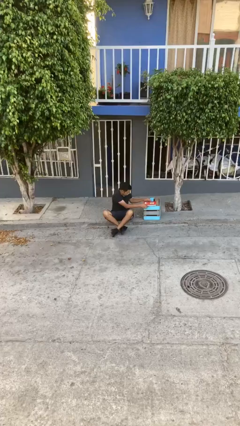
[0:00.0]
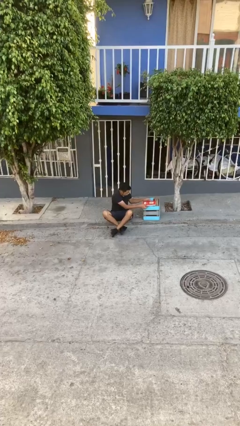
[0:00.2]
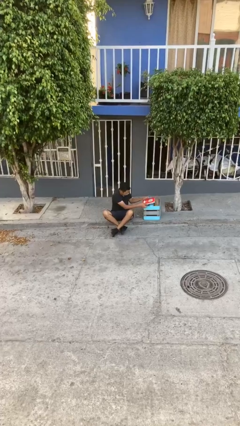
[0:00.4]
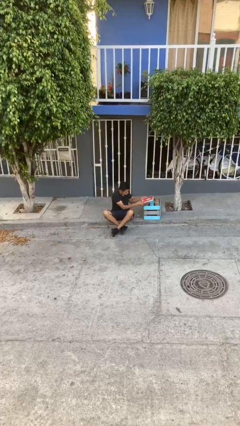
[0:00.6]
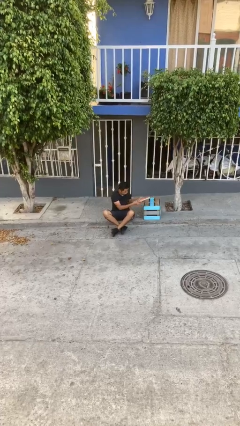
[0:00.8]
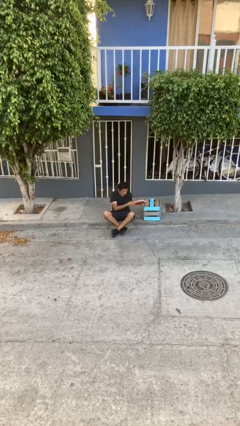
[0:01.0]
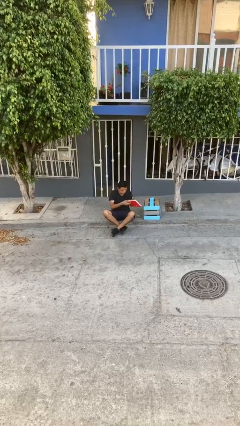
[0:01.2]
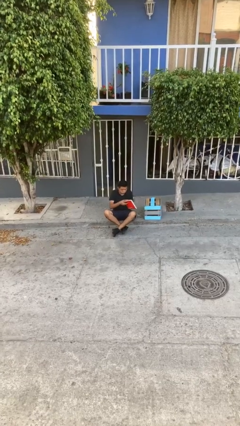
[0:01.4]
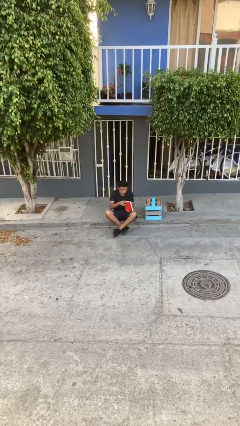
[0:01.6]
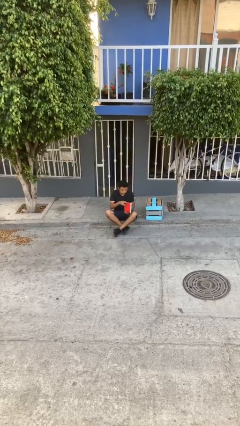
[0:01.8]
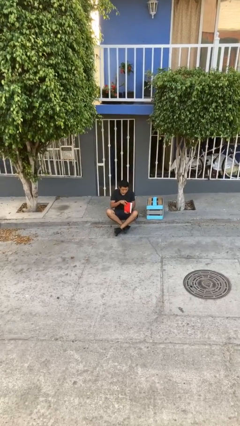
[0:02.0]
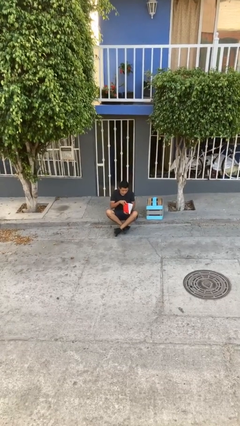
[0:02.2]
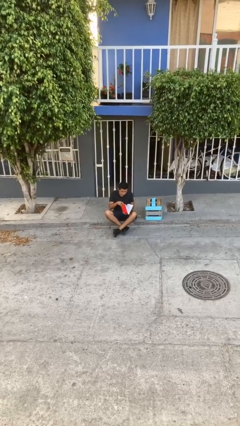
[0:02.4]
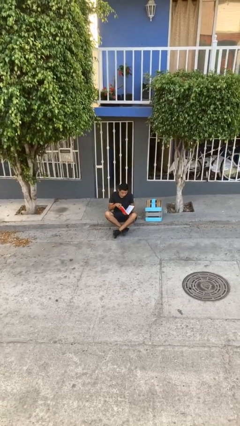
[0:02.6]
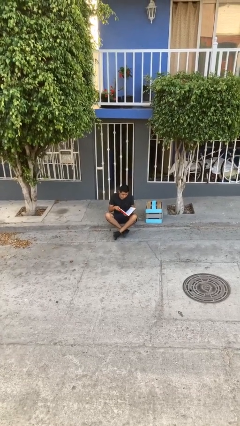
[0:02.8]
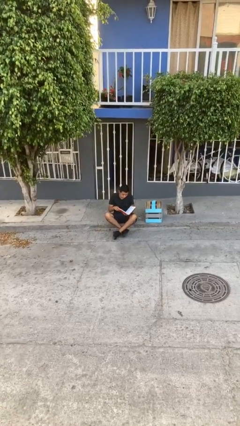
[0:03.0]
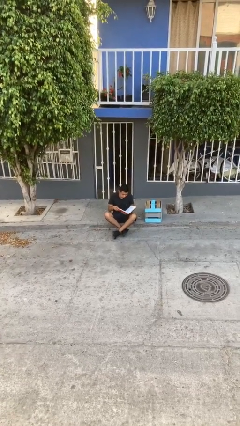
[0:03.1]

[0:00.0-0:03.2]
person picks up object from table

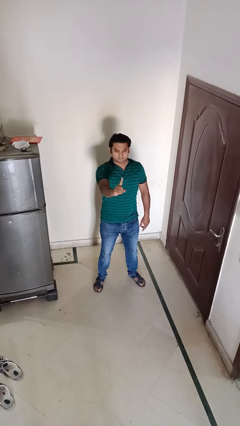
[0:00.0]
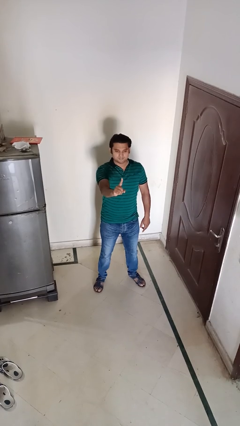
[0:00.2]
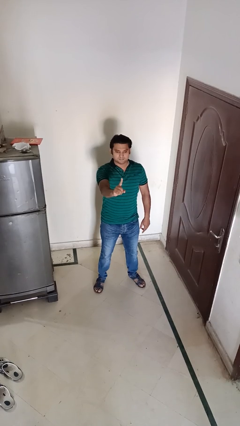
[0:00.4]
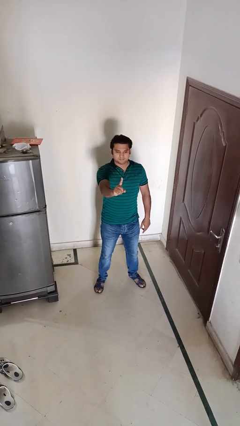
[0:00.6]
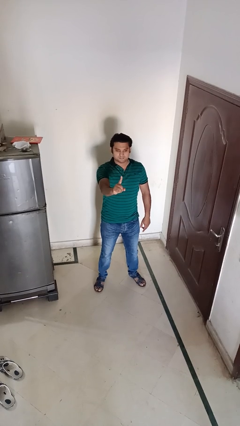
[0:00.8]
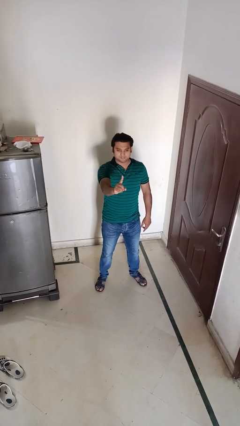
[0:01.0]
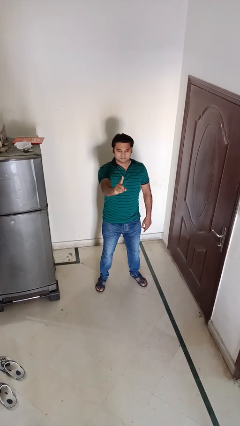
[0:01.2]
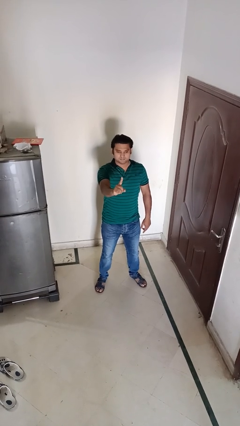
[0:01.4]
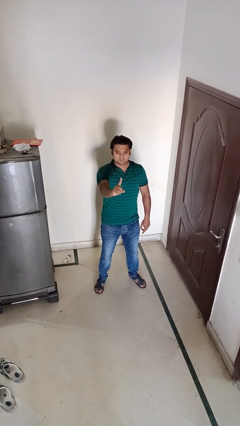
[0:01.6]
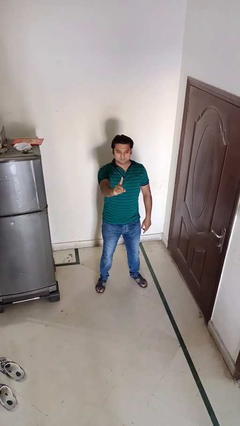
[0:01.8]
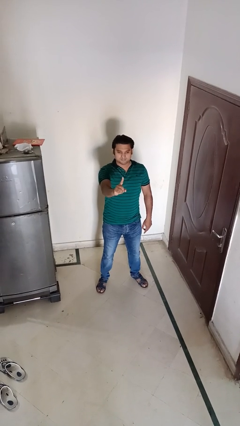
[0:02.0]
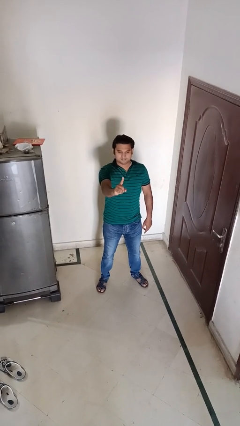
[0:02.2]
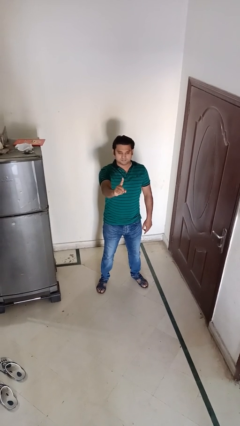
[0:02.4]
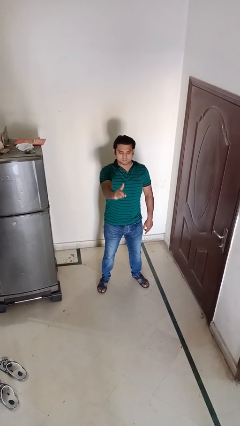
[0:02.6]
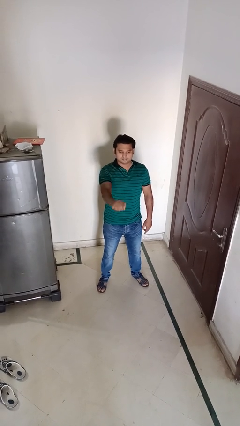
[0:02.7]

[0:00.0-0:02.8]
person gestures number one

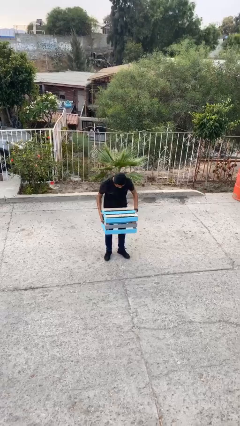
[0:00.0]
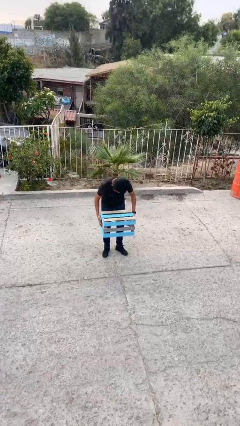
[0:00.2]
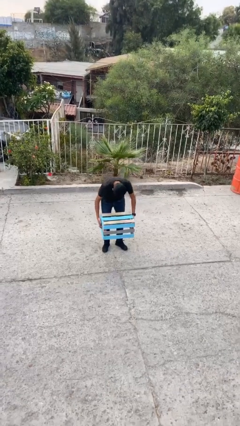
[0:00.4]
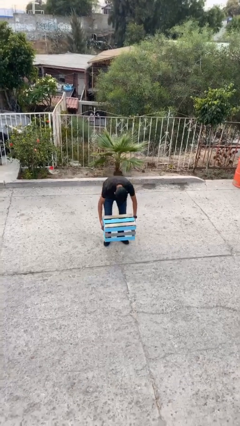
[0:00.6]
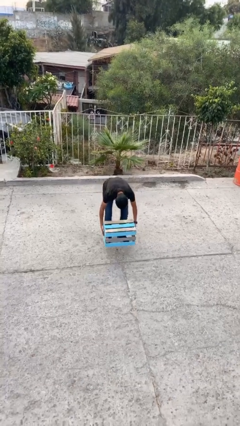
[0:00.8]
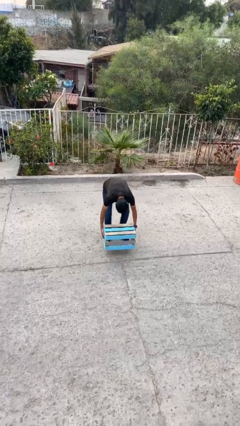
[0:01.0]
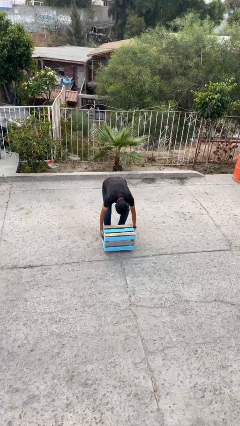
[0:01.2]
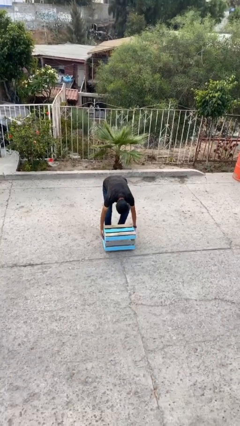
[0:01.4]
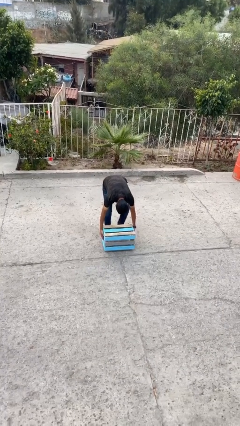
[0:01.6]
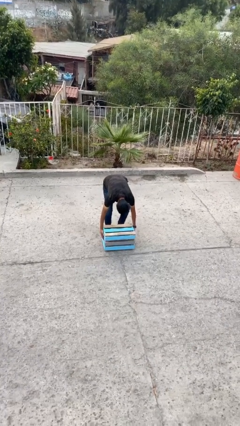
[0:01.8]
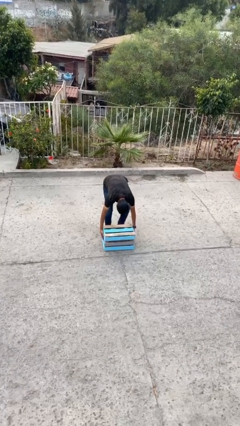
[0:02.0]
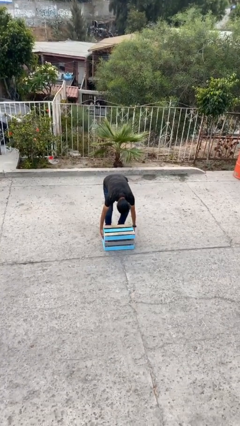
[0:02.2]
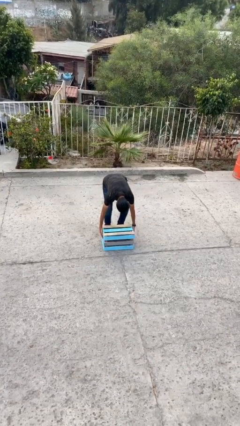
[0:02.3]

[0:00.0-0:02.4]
person puts down object on floor

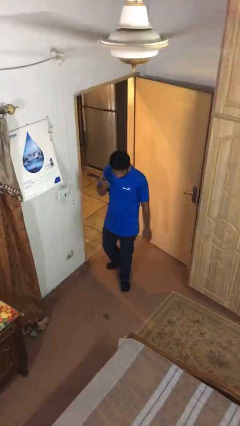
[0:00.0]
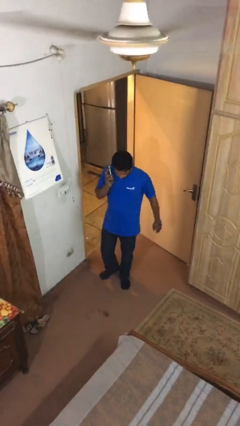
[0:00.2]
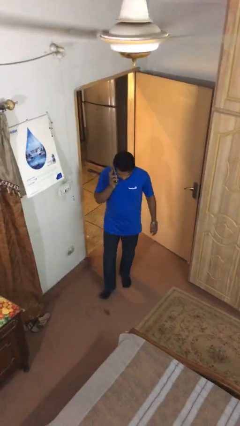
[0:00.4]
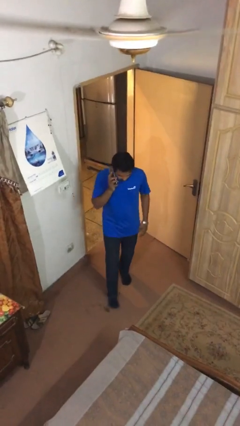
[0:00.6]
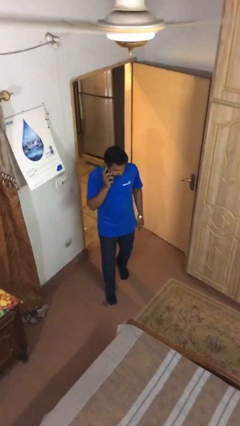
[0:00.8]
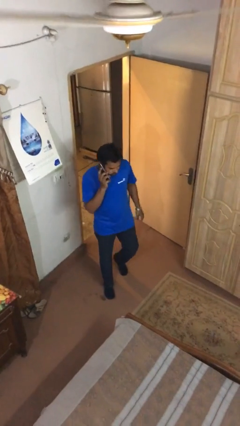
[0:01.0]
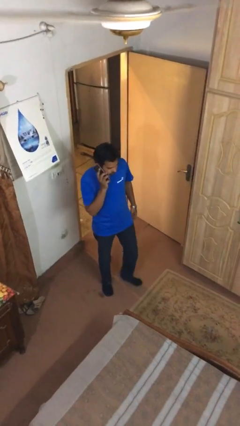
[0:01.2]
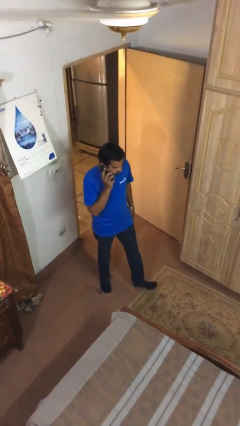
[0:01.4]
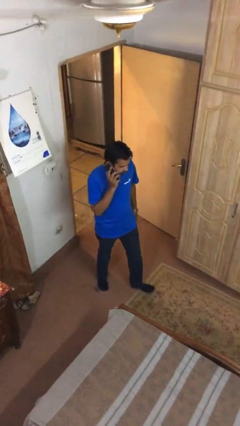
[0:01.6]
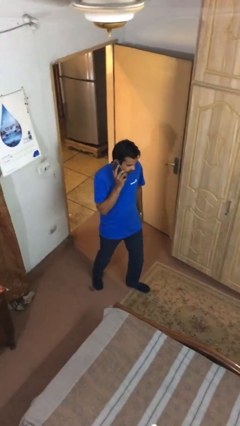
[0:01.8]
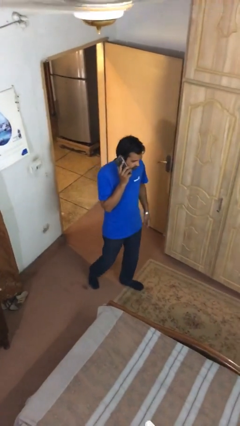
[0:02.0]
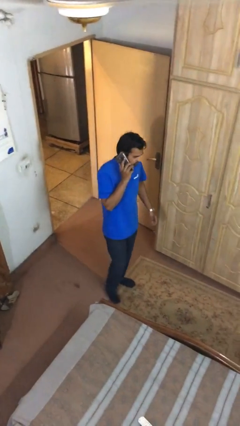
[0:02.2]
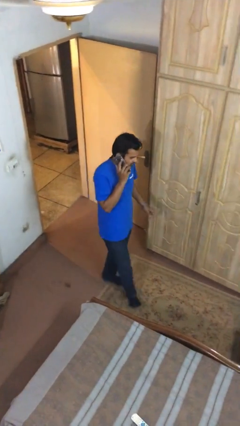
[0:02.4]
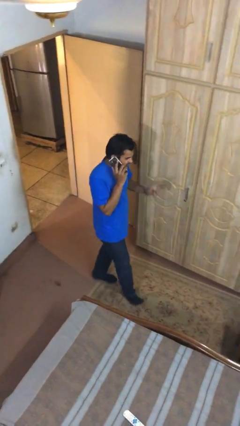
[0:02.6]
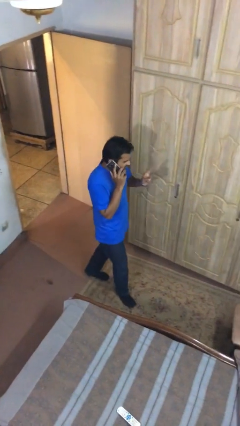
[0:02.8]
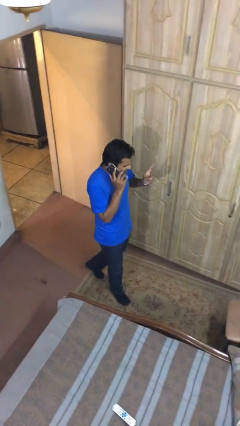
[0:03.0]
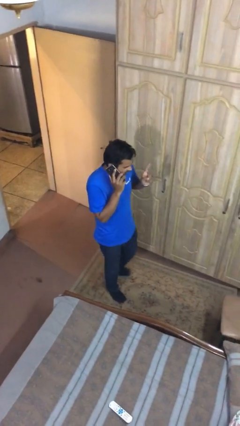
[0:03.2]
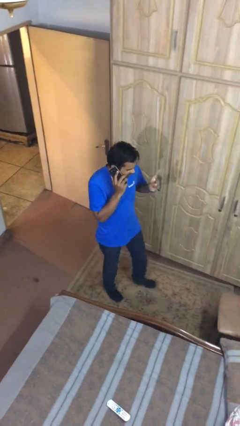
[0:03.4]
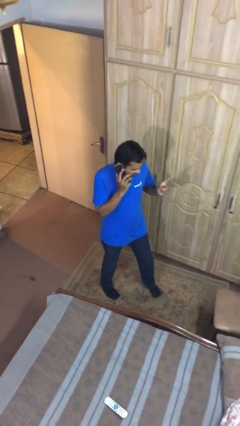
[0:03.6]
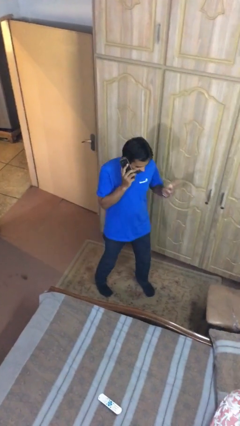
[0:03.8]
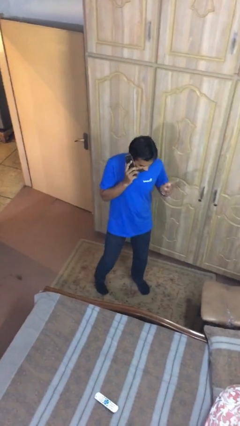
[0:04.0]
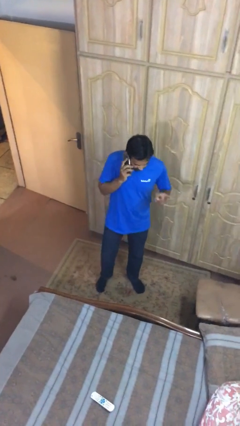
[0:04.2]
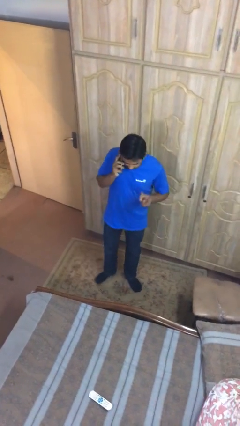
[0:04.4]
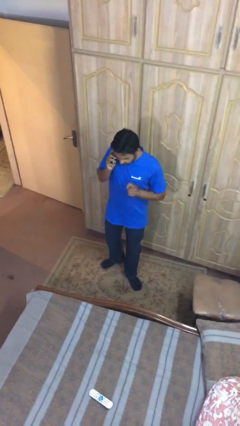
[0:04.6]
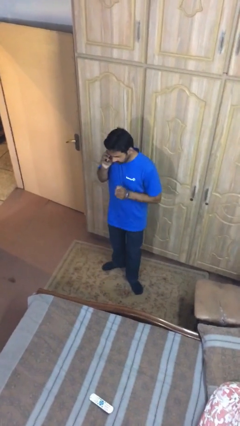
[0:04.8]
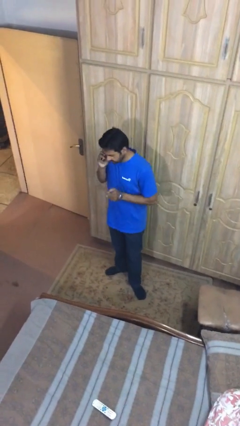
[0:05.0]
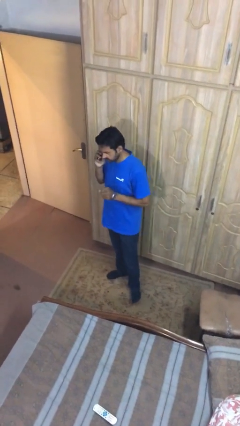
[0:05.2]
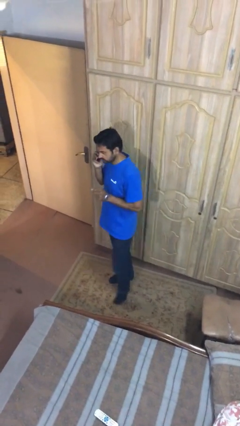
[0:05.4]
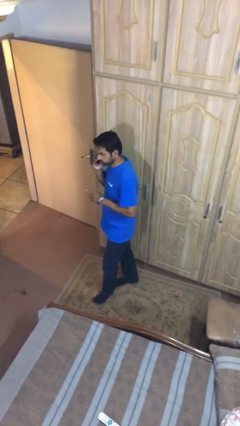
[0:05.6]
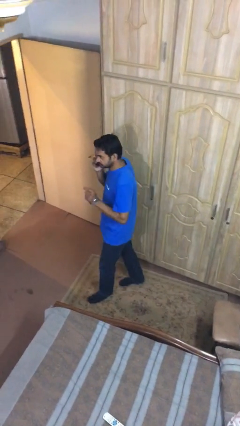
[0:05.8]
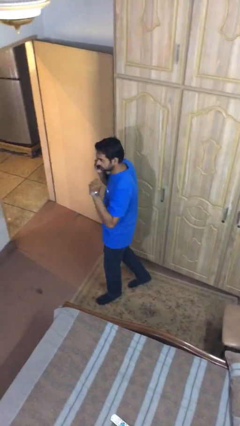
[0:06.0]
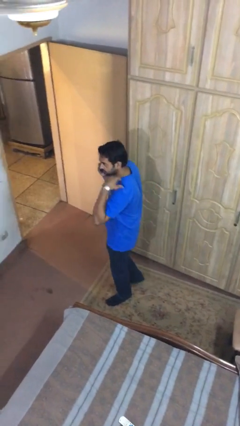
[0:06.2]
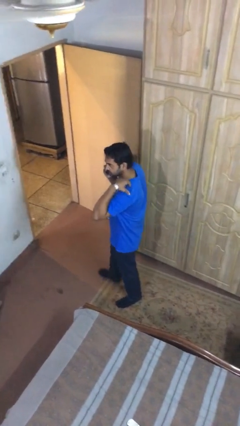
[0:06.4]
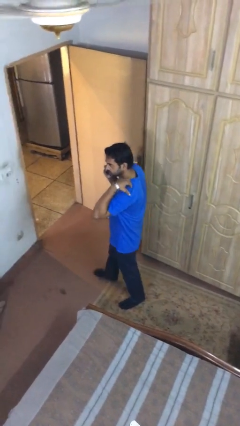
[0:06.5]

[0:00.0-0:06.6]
person talks on phone

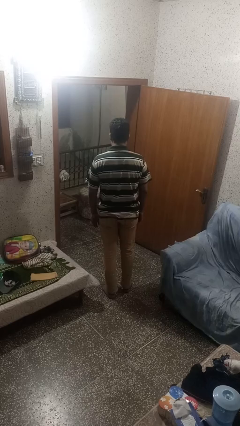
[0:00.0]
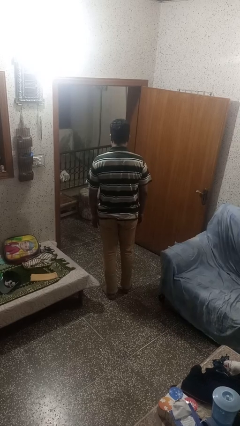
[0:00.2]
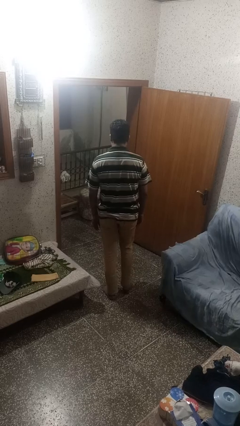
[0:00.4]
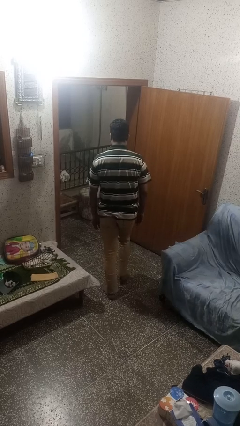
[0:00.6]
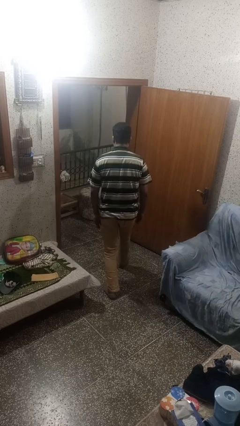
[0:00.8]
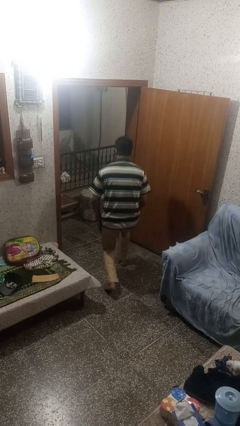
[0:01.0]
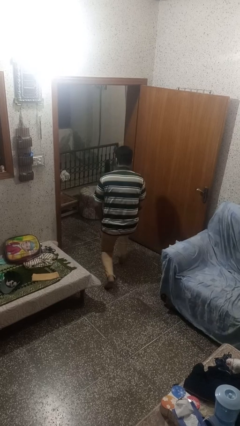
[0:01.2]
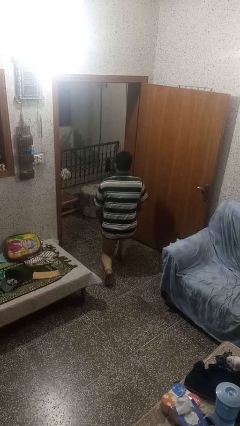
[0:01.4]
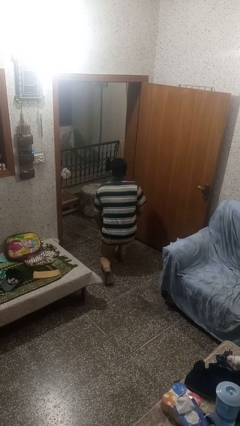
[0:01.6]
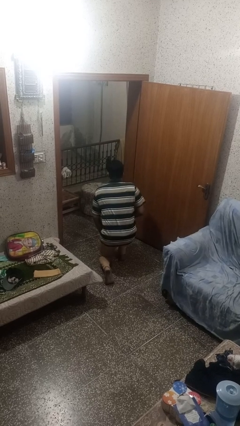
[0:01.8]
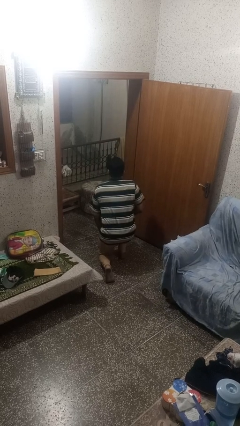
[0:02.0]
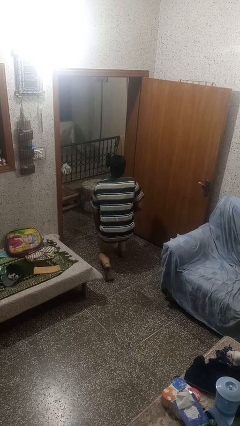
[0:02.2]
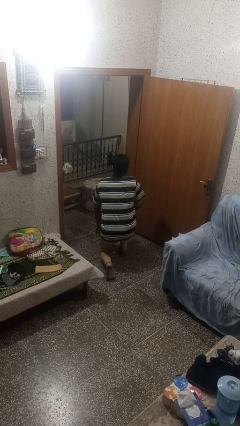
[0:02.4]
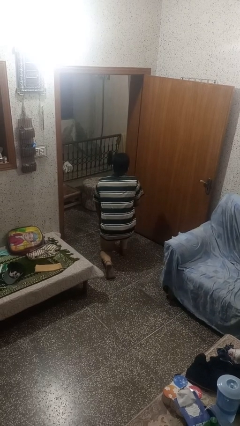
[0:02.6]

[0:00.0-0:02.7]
person kneels
